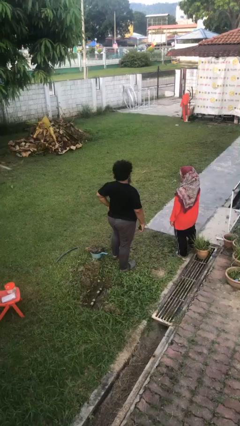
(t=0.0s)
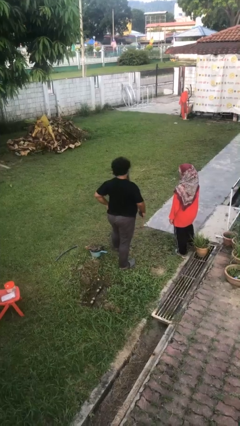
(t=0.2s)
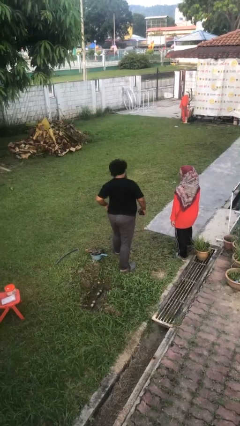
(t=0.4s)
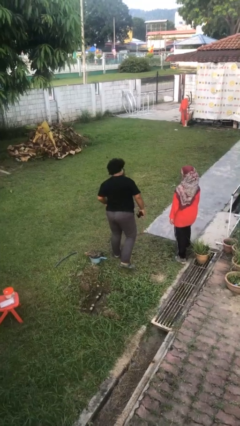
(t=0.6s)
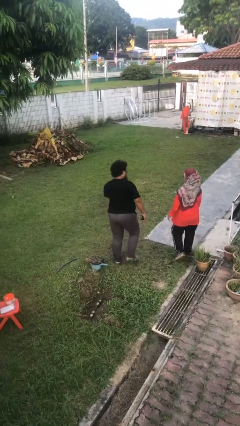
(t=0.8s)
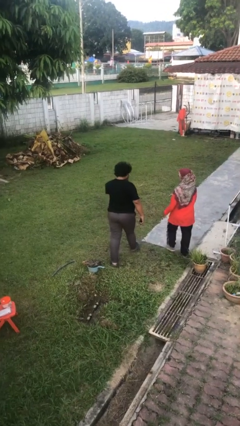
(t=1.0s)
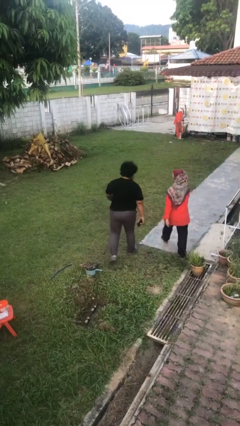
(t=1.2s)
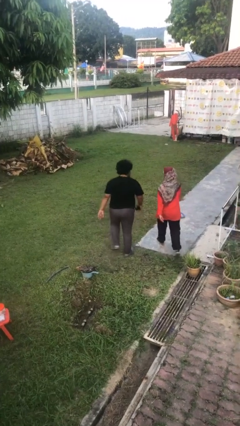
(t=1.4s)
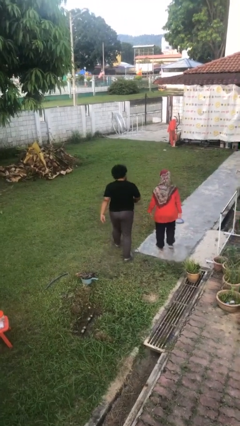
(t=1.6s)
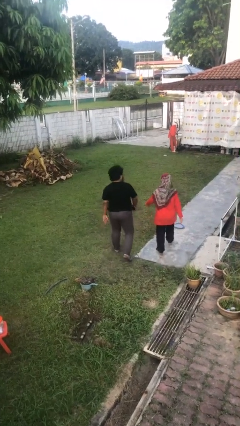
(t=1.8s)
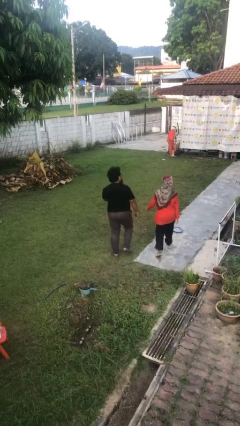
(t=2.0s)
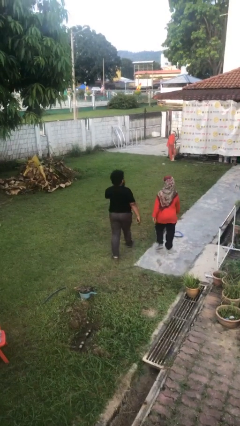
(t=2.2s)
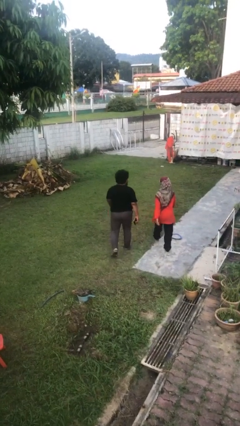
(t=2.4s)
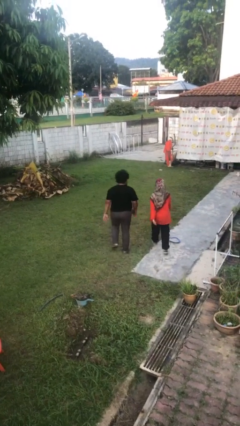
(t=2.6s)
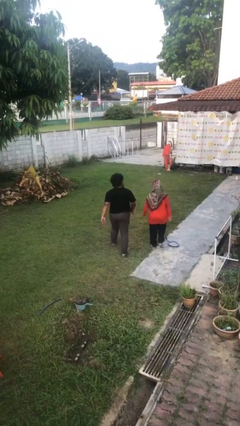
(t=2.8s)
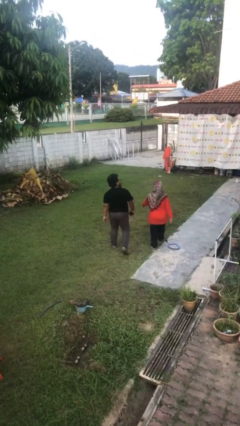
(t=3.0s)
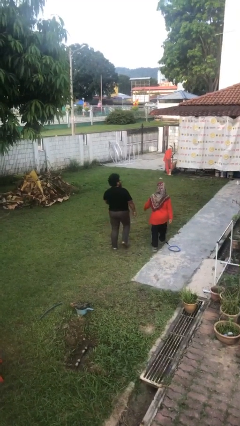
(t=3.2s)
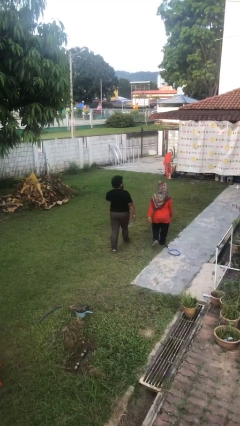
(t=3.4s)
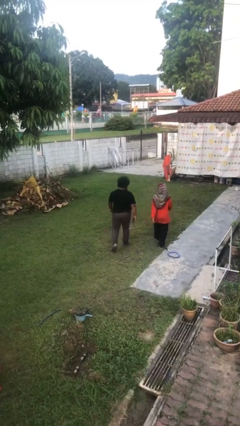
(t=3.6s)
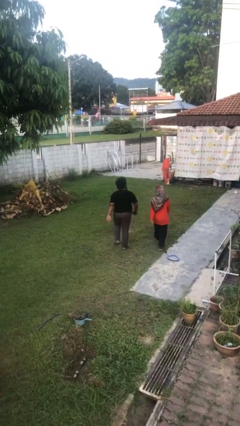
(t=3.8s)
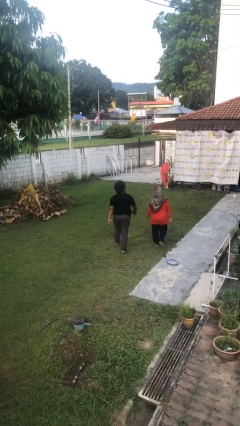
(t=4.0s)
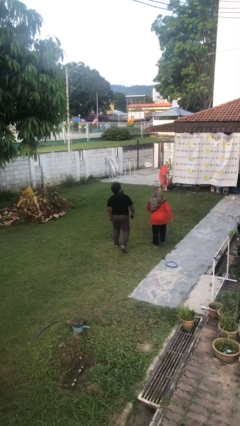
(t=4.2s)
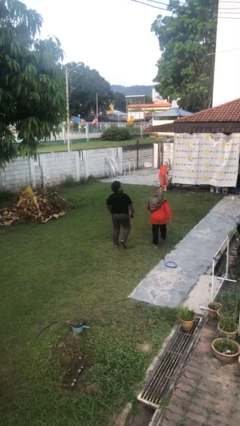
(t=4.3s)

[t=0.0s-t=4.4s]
person talks to person

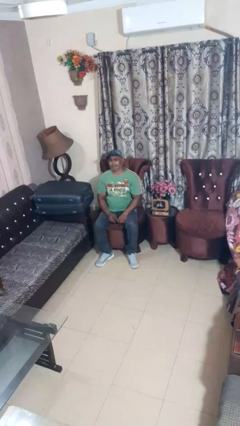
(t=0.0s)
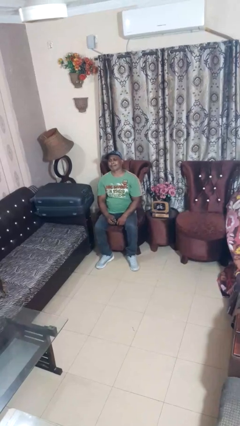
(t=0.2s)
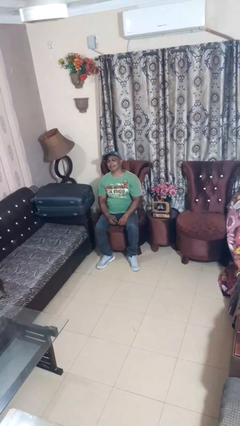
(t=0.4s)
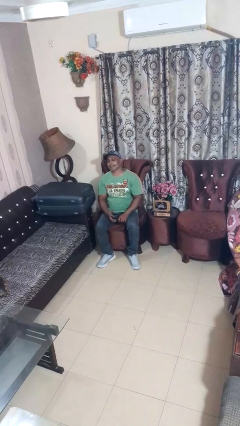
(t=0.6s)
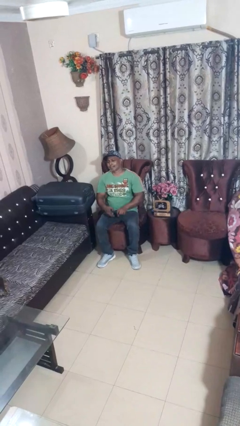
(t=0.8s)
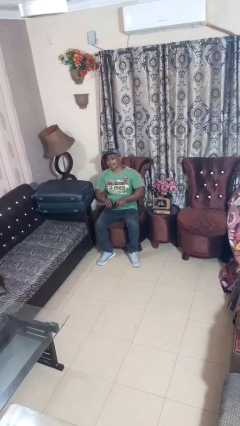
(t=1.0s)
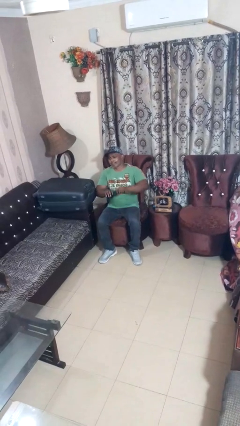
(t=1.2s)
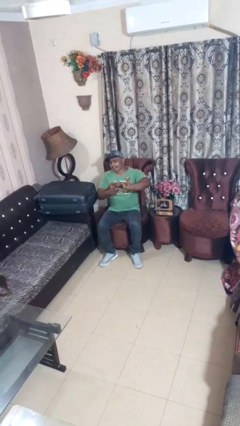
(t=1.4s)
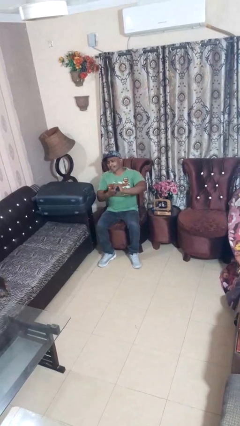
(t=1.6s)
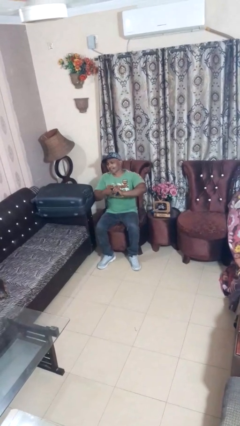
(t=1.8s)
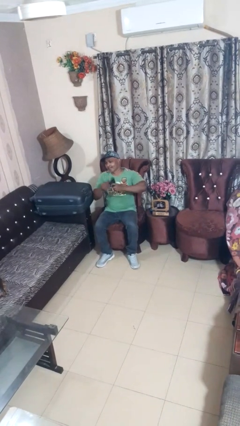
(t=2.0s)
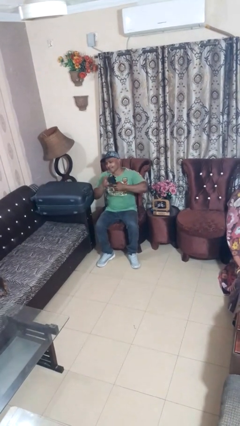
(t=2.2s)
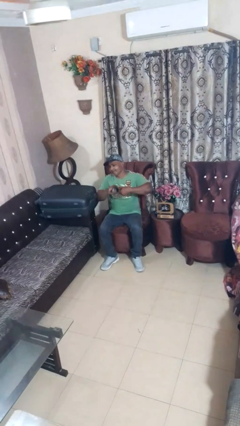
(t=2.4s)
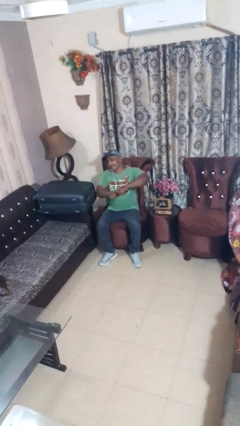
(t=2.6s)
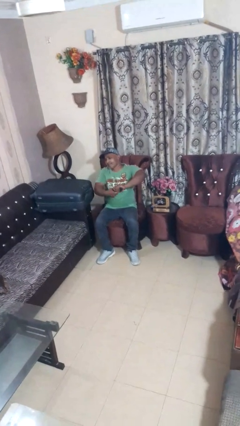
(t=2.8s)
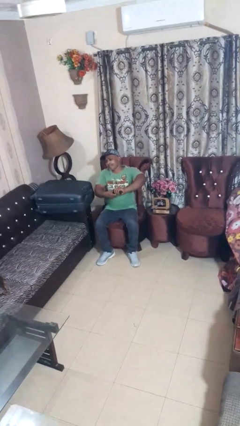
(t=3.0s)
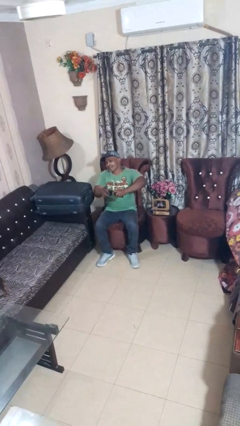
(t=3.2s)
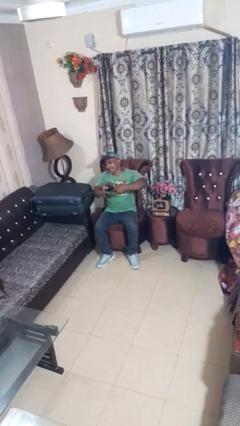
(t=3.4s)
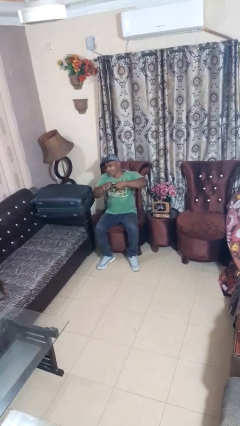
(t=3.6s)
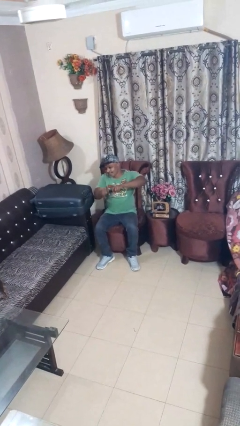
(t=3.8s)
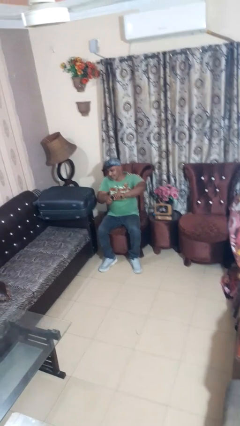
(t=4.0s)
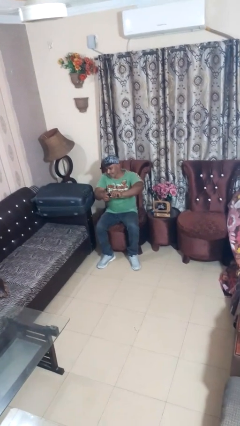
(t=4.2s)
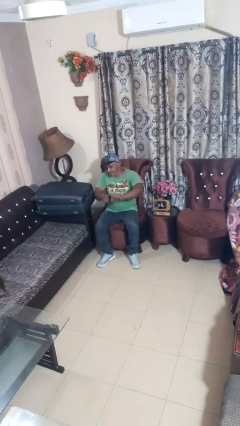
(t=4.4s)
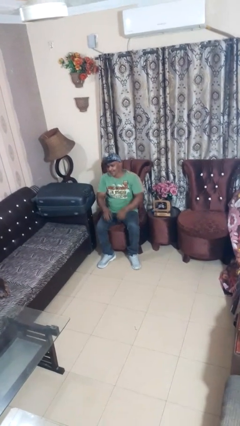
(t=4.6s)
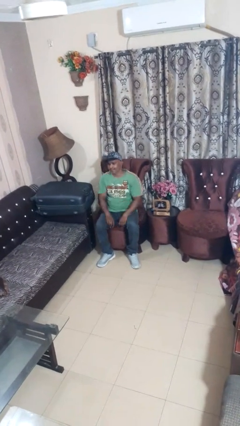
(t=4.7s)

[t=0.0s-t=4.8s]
person squeezes object

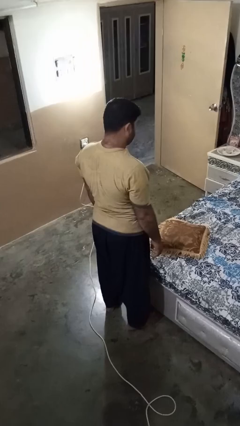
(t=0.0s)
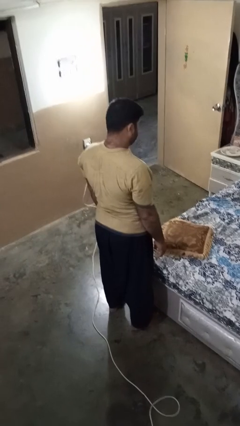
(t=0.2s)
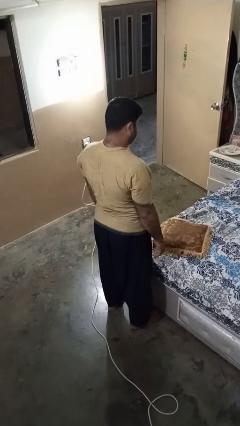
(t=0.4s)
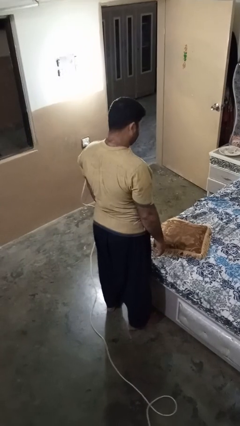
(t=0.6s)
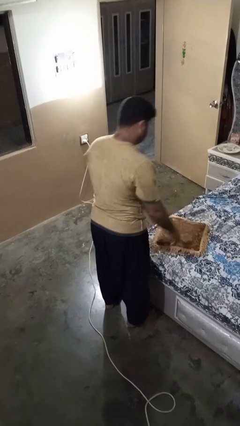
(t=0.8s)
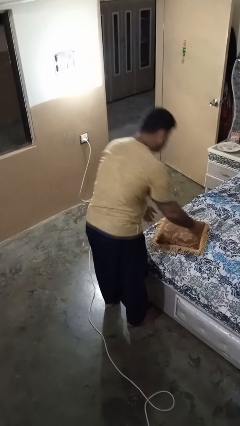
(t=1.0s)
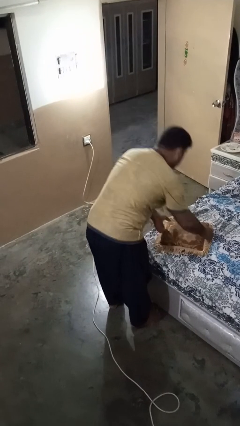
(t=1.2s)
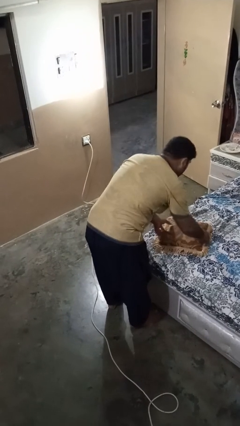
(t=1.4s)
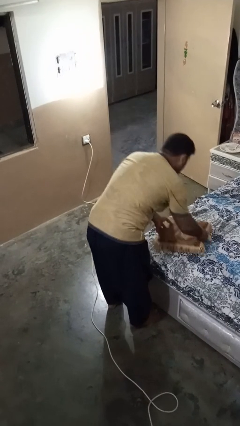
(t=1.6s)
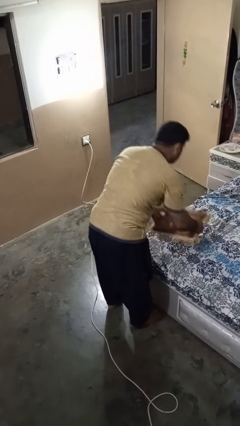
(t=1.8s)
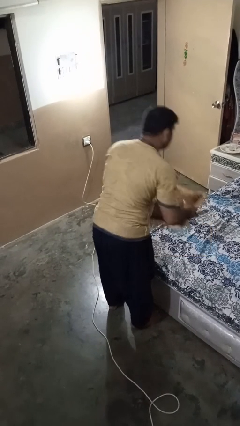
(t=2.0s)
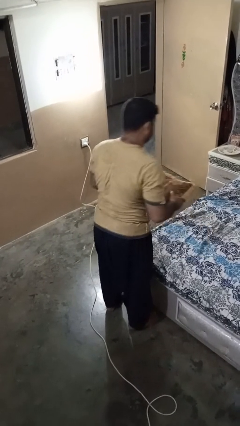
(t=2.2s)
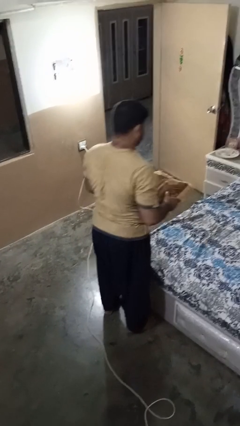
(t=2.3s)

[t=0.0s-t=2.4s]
person picks up object from bed

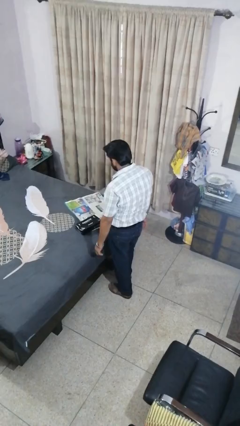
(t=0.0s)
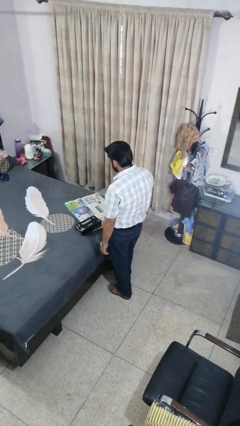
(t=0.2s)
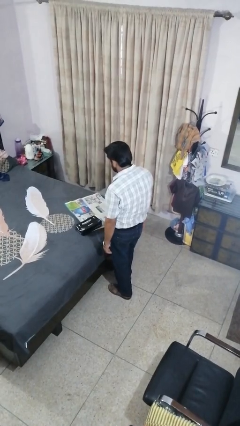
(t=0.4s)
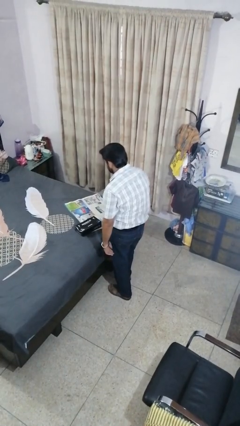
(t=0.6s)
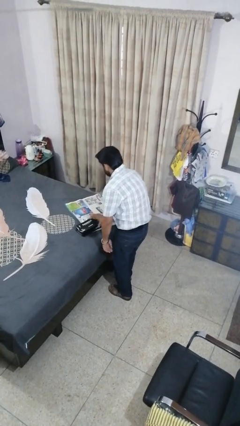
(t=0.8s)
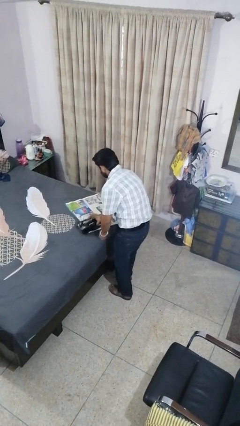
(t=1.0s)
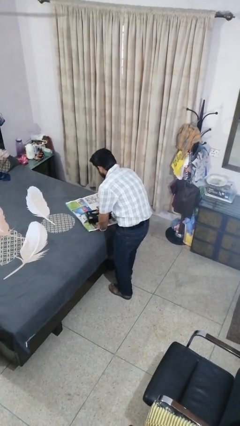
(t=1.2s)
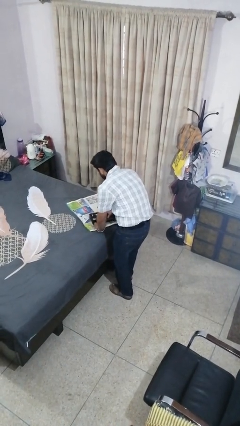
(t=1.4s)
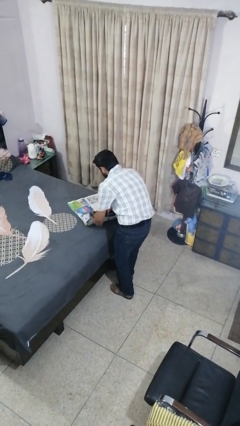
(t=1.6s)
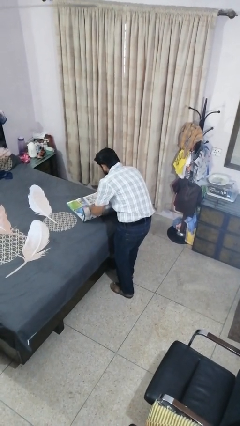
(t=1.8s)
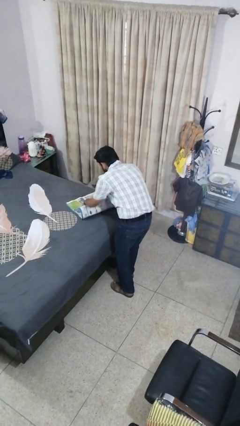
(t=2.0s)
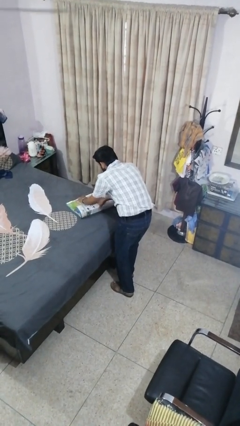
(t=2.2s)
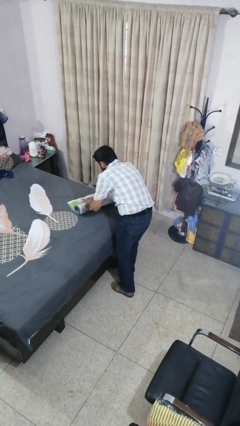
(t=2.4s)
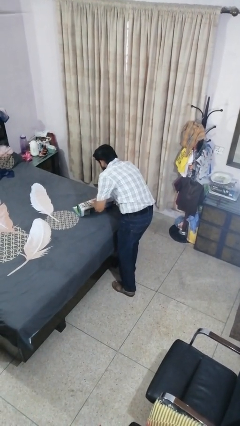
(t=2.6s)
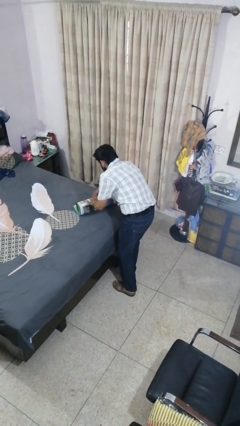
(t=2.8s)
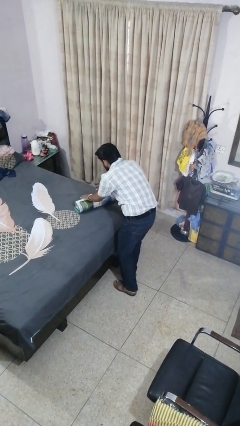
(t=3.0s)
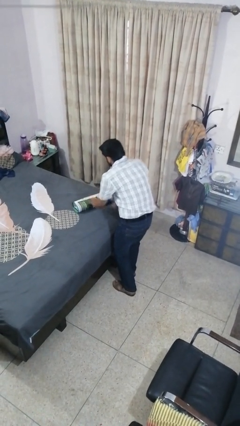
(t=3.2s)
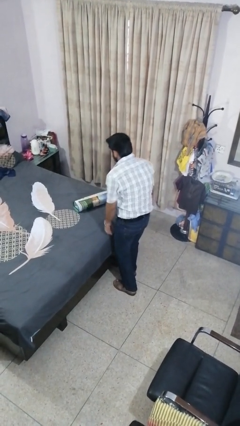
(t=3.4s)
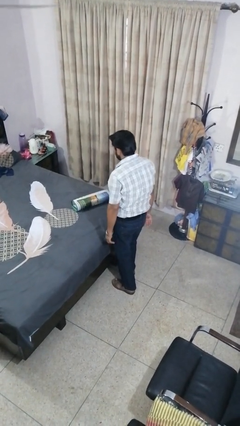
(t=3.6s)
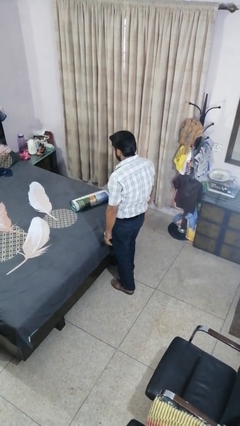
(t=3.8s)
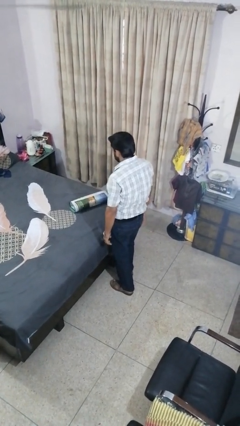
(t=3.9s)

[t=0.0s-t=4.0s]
person wraps box

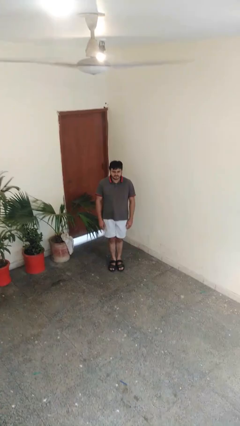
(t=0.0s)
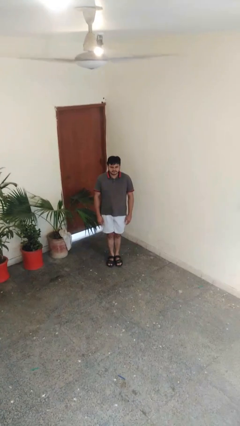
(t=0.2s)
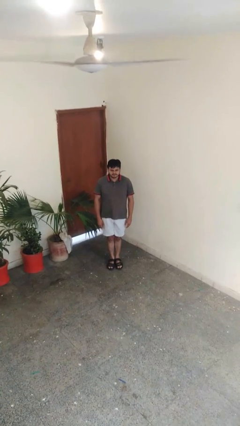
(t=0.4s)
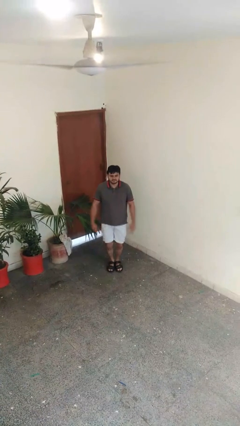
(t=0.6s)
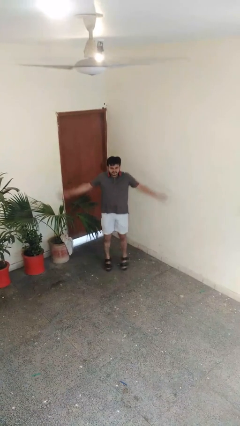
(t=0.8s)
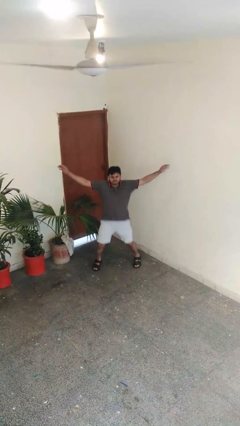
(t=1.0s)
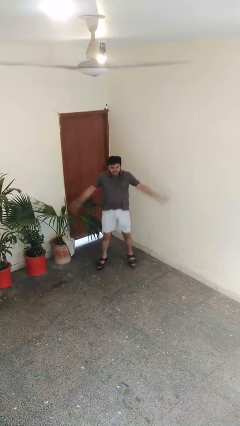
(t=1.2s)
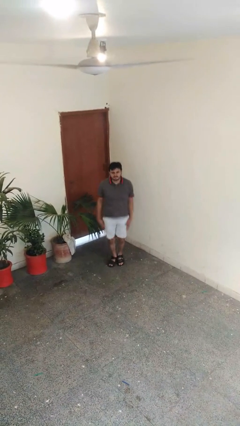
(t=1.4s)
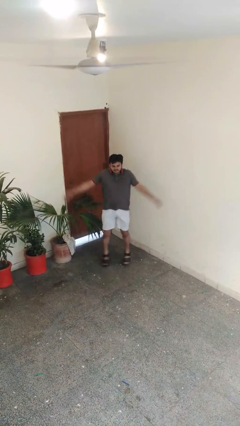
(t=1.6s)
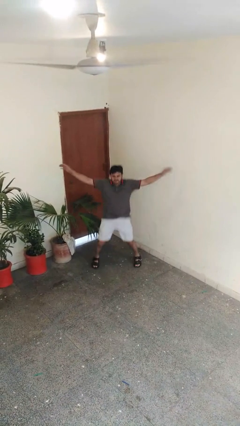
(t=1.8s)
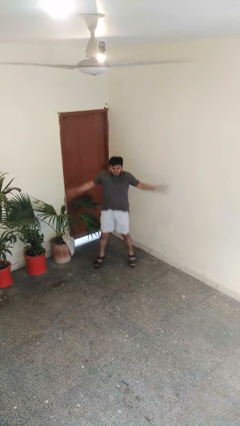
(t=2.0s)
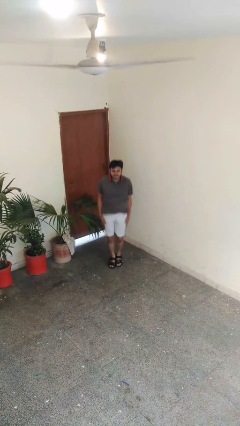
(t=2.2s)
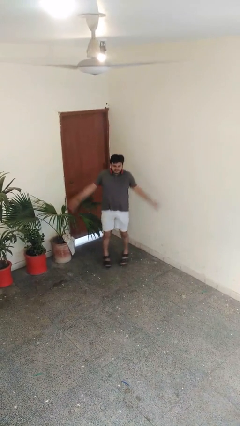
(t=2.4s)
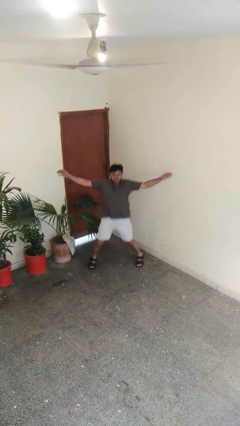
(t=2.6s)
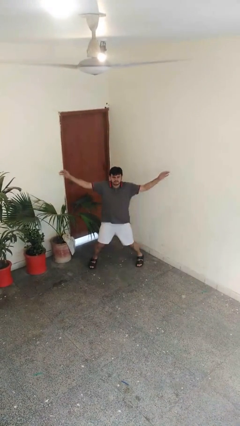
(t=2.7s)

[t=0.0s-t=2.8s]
person exercises with jumping jacks
